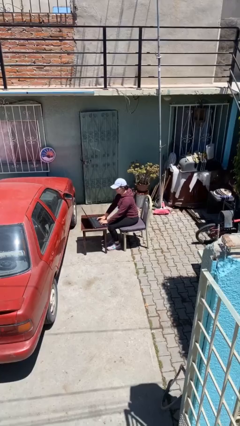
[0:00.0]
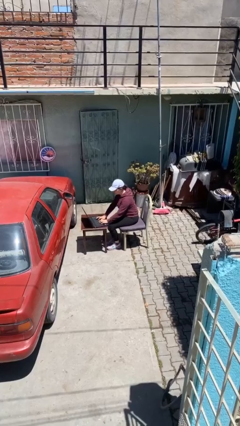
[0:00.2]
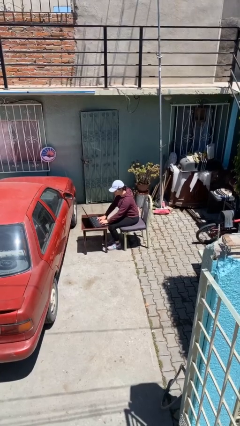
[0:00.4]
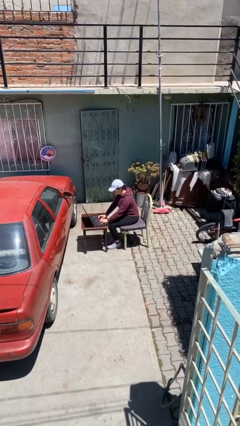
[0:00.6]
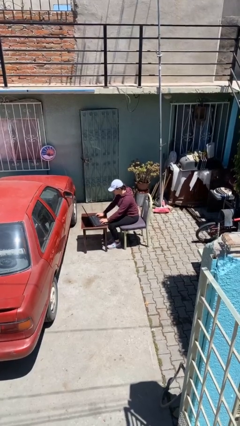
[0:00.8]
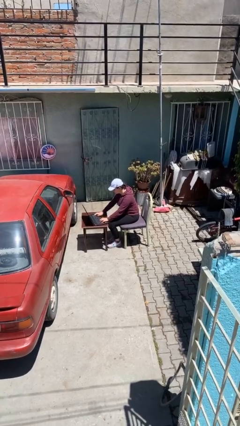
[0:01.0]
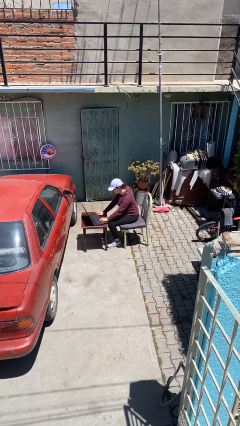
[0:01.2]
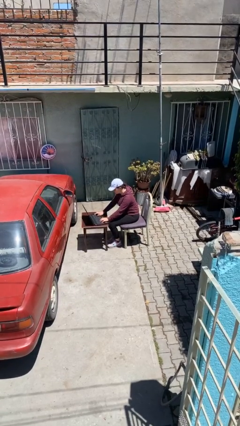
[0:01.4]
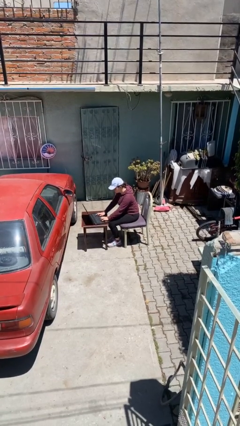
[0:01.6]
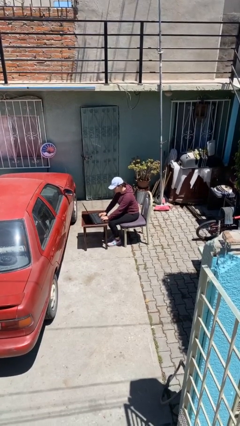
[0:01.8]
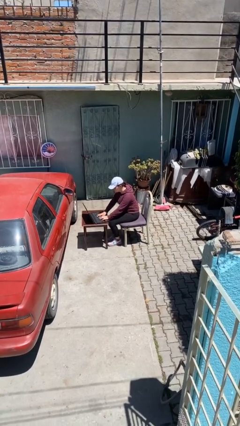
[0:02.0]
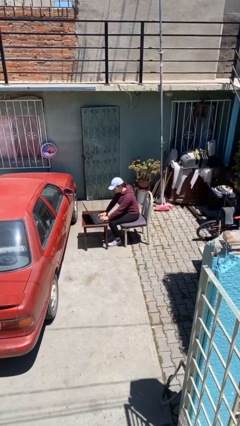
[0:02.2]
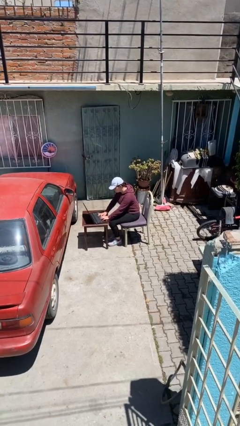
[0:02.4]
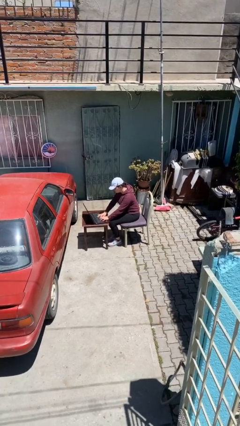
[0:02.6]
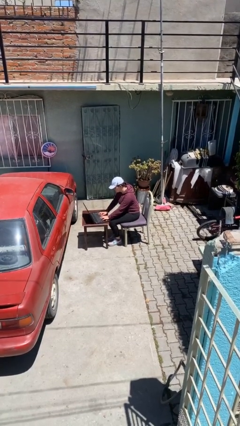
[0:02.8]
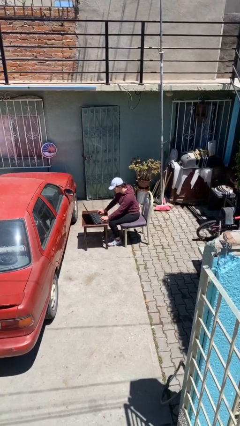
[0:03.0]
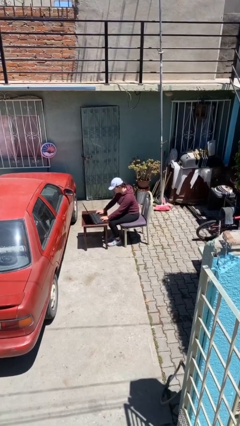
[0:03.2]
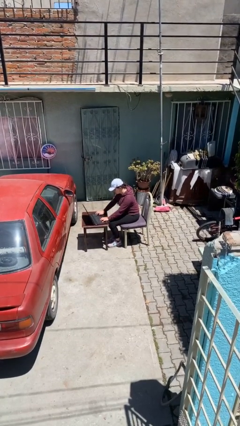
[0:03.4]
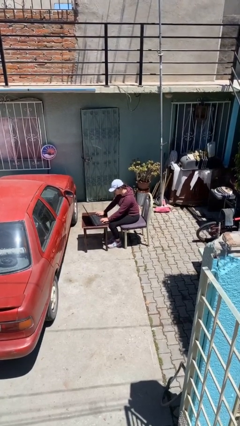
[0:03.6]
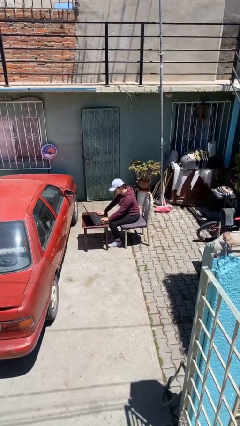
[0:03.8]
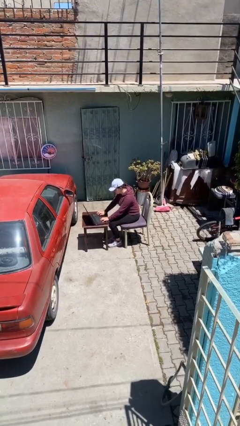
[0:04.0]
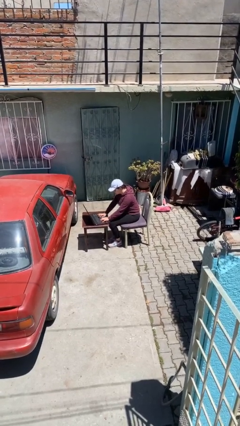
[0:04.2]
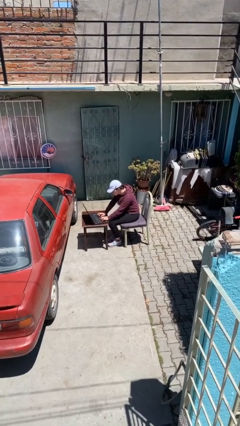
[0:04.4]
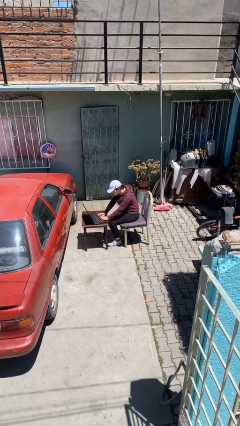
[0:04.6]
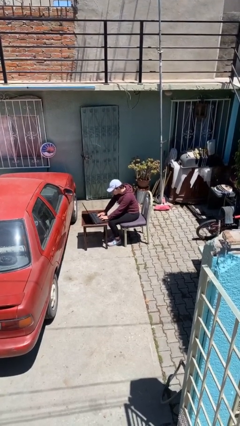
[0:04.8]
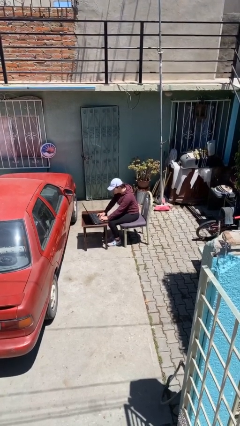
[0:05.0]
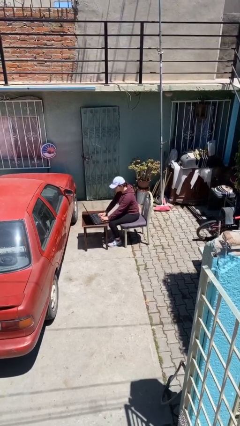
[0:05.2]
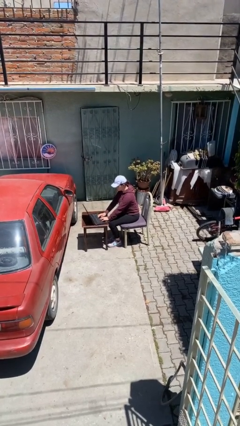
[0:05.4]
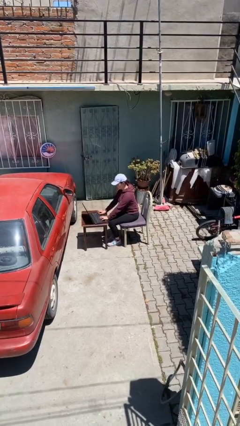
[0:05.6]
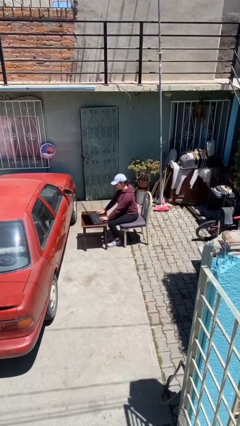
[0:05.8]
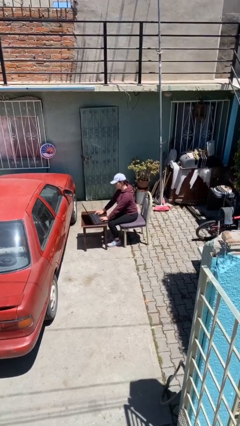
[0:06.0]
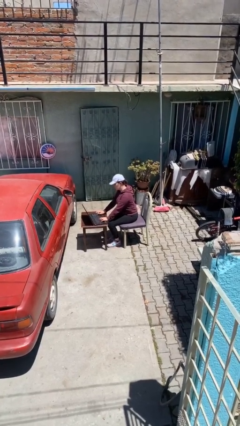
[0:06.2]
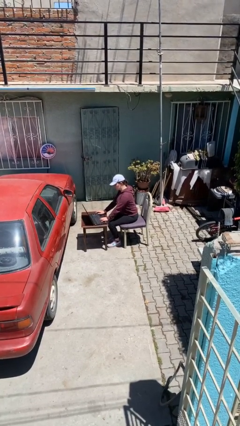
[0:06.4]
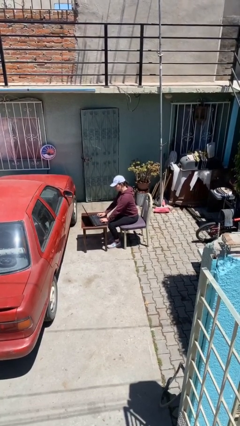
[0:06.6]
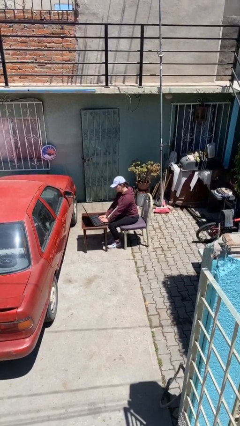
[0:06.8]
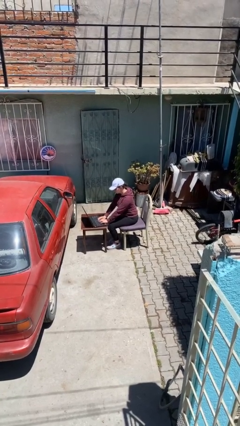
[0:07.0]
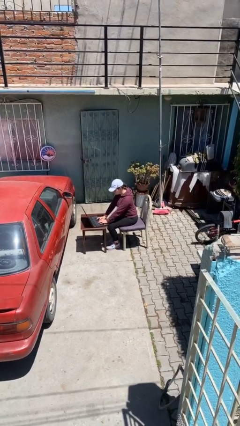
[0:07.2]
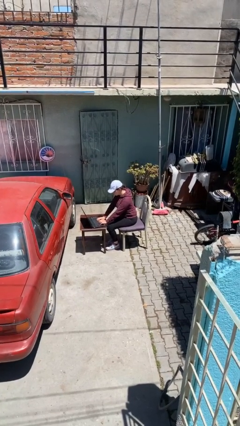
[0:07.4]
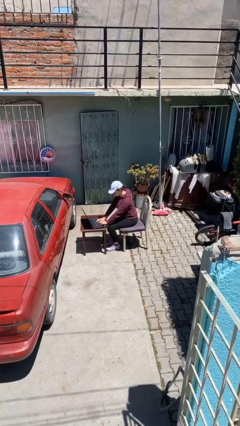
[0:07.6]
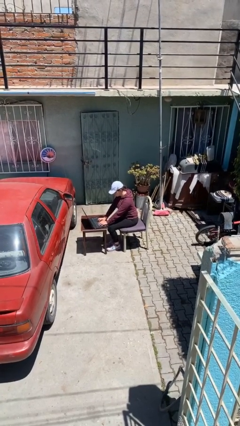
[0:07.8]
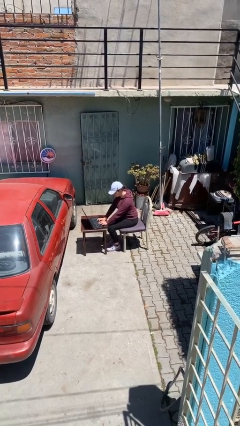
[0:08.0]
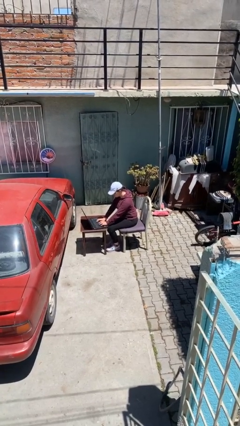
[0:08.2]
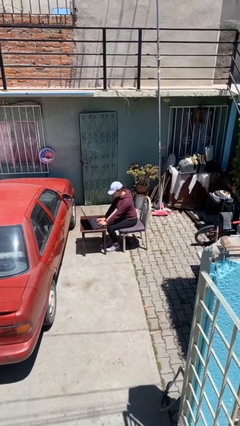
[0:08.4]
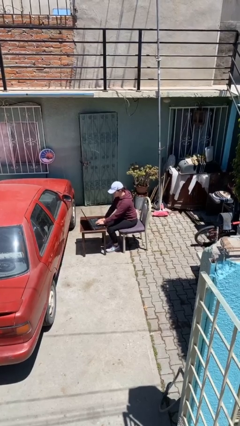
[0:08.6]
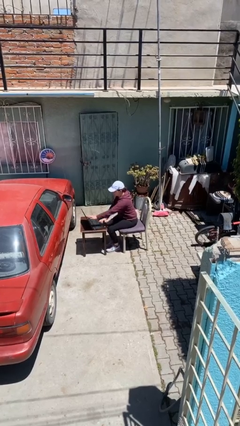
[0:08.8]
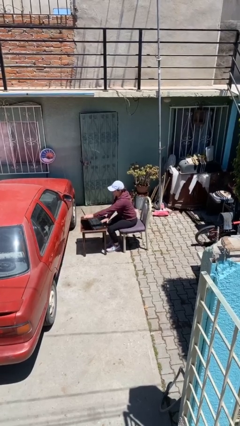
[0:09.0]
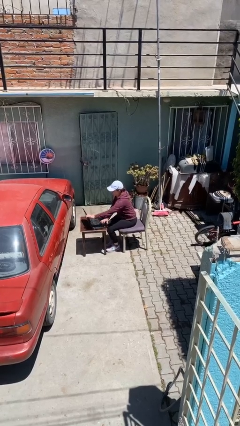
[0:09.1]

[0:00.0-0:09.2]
person interacts with laptop

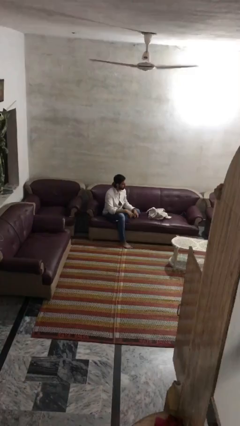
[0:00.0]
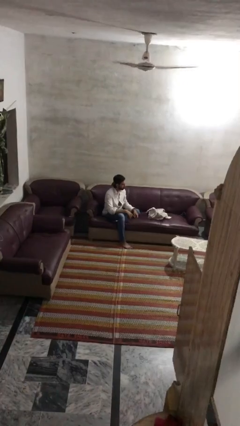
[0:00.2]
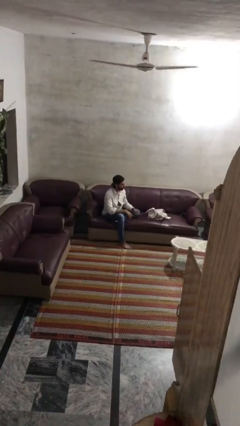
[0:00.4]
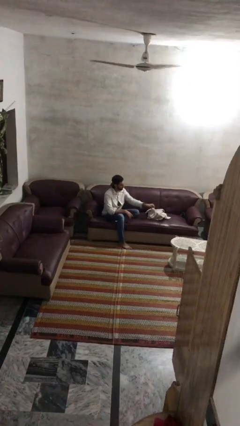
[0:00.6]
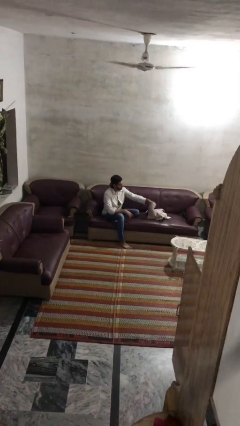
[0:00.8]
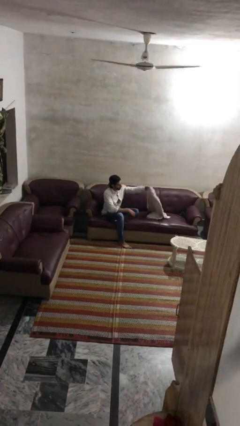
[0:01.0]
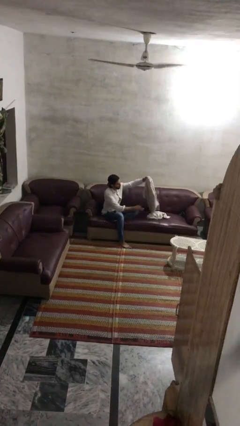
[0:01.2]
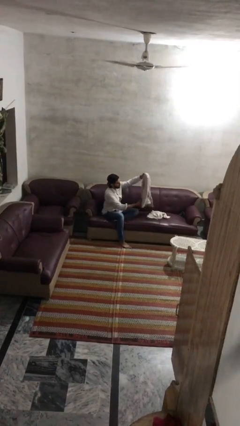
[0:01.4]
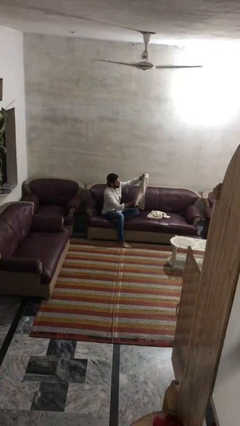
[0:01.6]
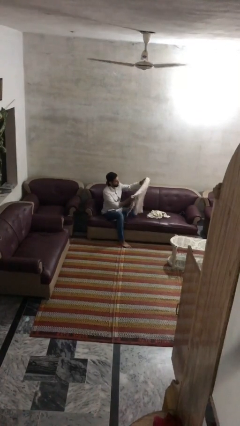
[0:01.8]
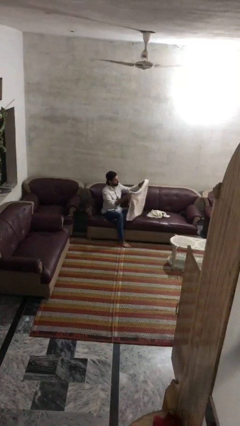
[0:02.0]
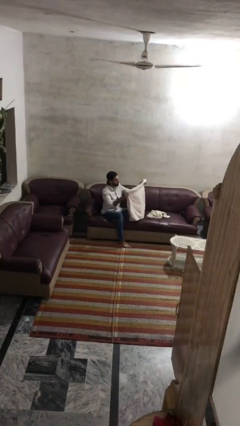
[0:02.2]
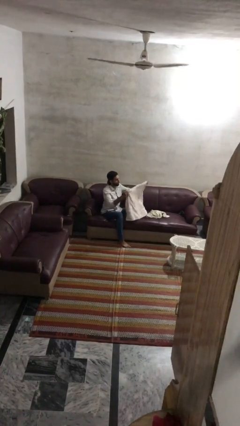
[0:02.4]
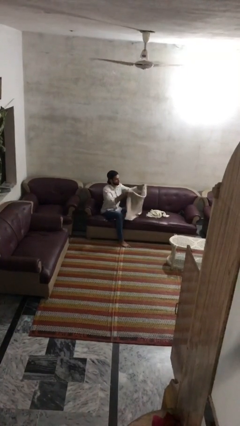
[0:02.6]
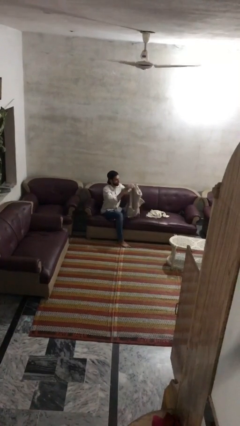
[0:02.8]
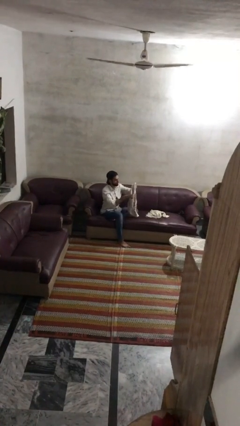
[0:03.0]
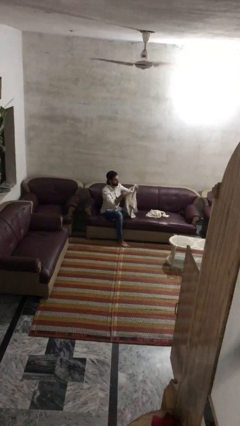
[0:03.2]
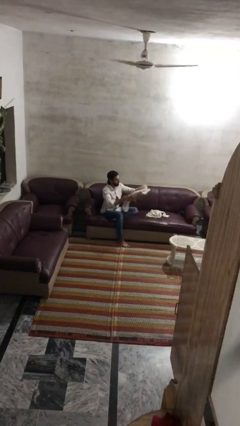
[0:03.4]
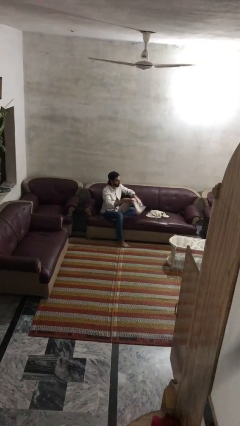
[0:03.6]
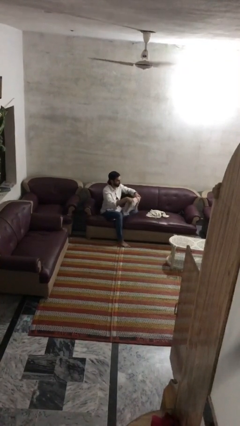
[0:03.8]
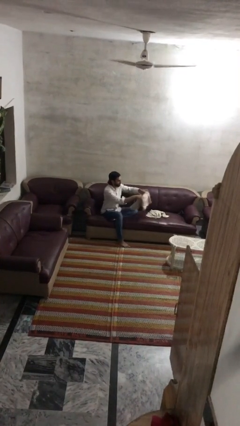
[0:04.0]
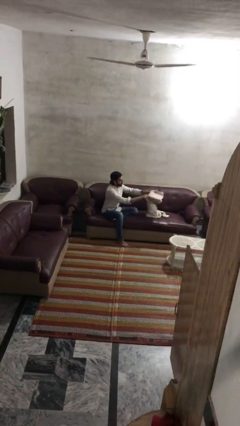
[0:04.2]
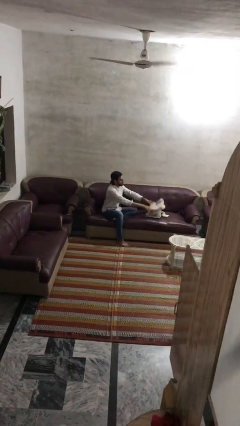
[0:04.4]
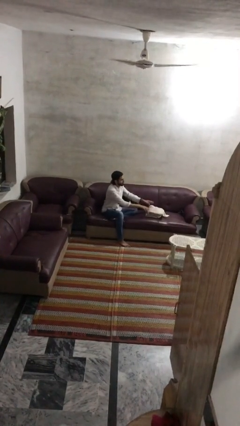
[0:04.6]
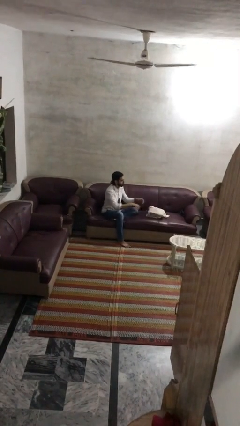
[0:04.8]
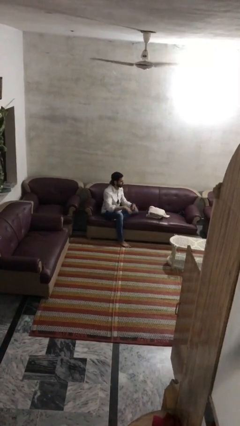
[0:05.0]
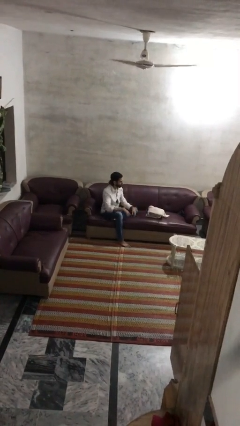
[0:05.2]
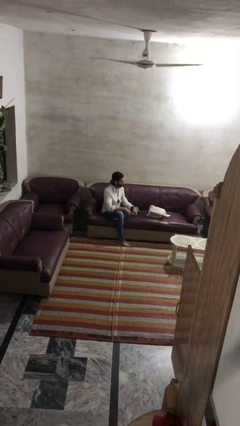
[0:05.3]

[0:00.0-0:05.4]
person folds towel

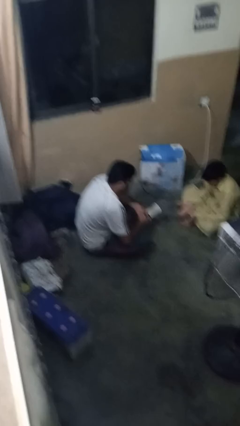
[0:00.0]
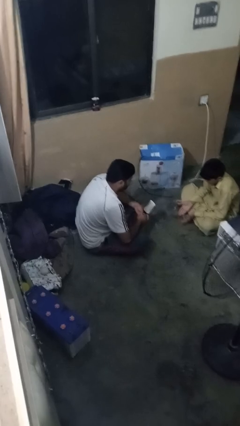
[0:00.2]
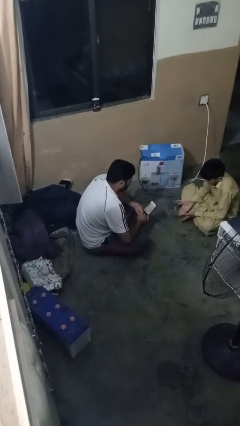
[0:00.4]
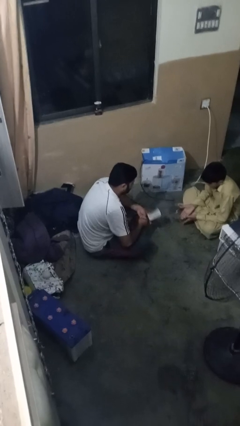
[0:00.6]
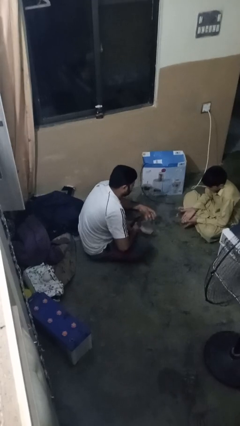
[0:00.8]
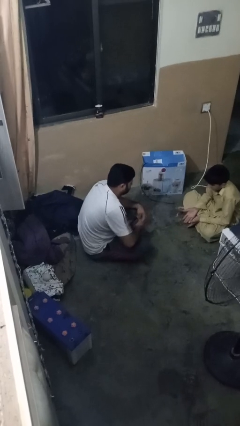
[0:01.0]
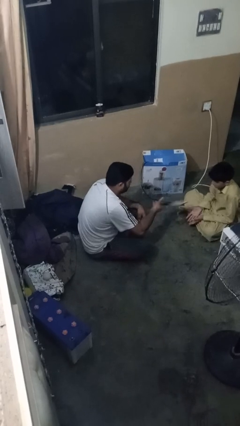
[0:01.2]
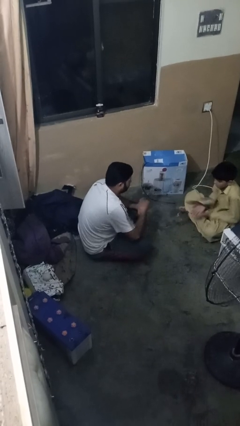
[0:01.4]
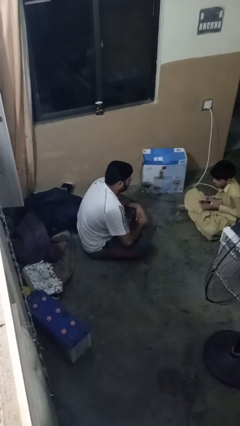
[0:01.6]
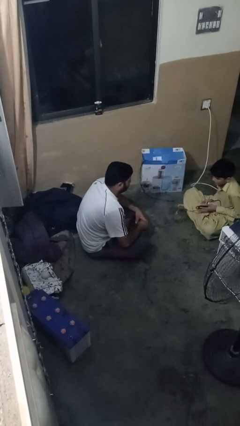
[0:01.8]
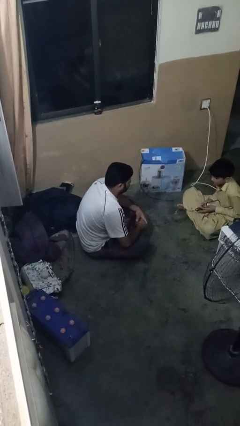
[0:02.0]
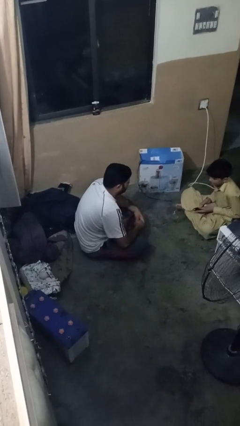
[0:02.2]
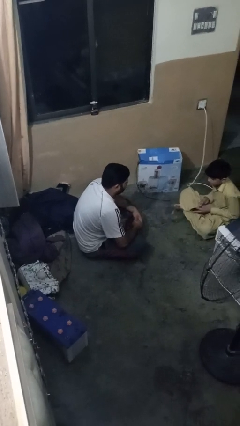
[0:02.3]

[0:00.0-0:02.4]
person throws object to person

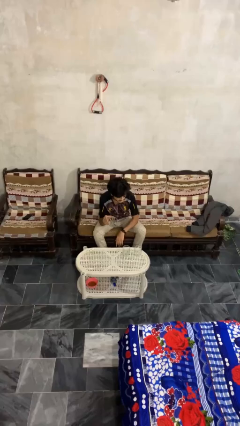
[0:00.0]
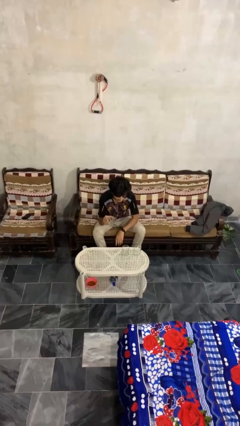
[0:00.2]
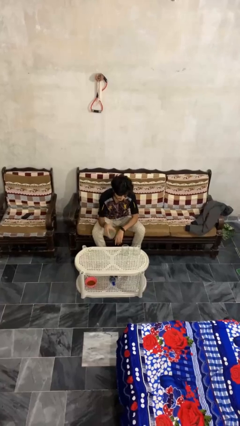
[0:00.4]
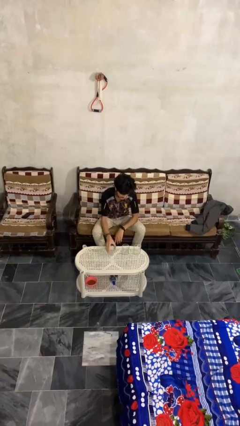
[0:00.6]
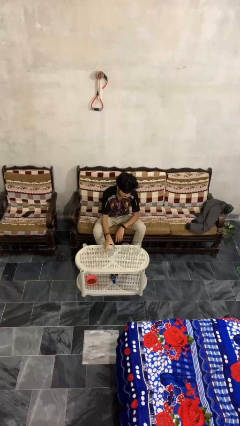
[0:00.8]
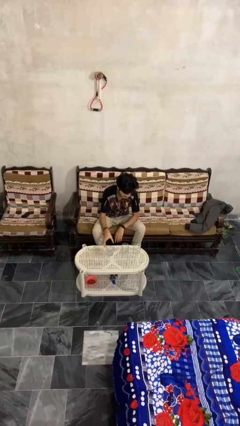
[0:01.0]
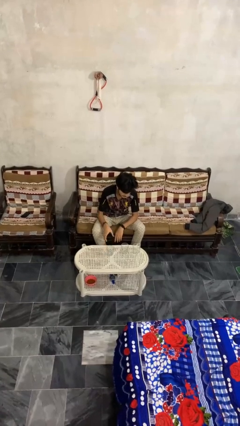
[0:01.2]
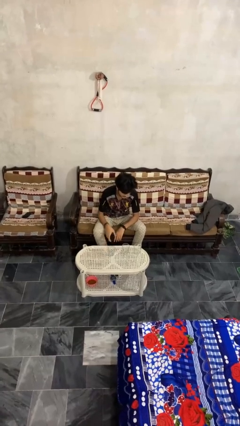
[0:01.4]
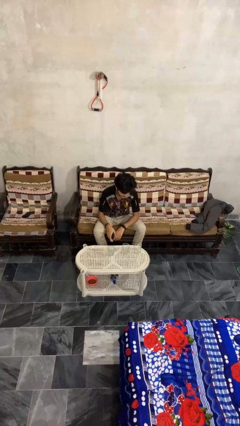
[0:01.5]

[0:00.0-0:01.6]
person puts down object on table
